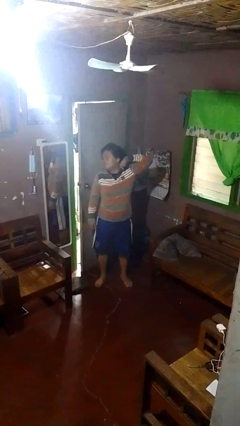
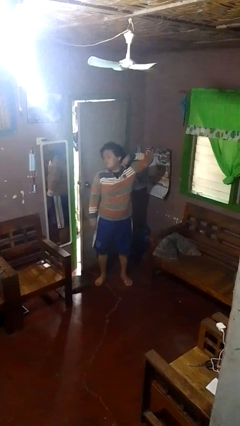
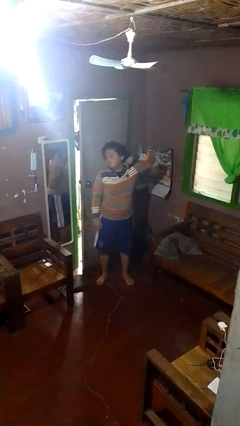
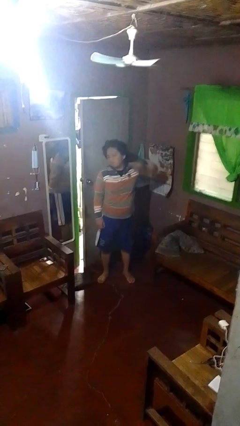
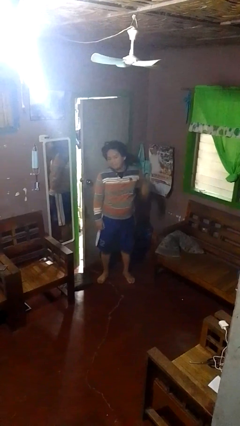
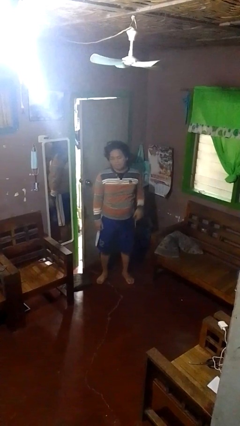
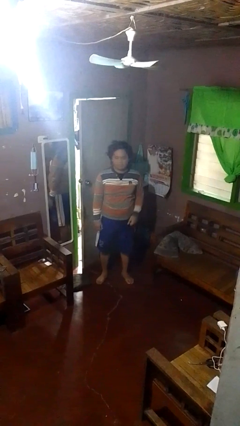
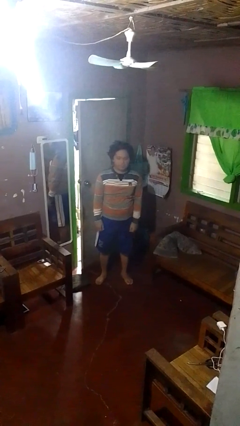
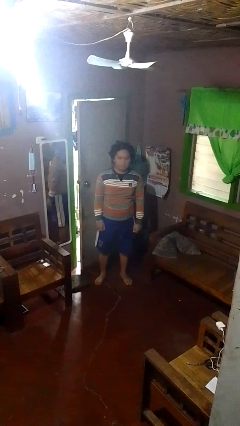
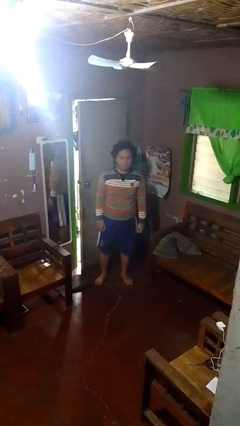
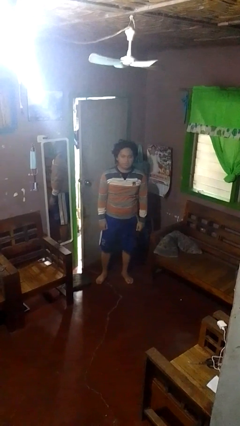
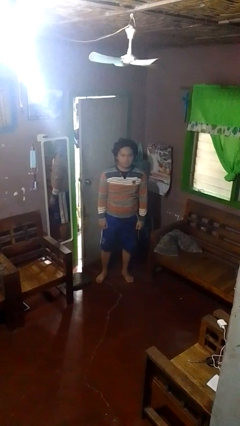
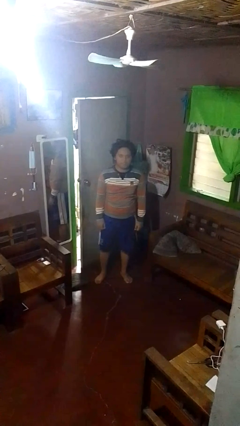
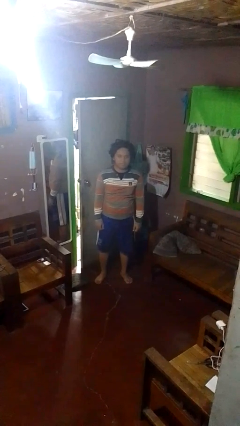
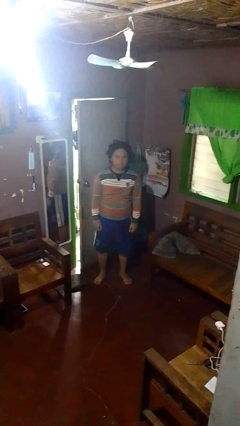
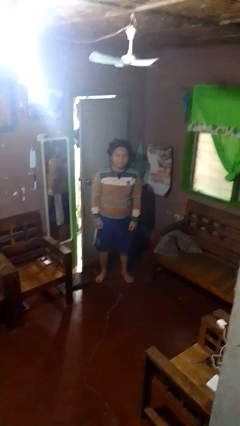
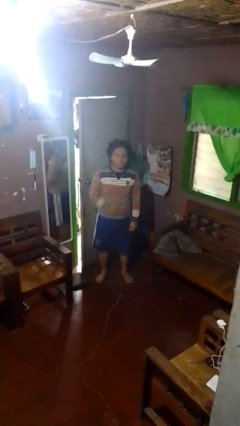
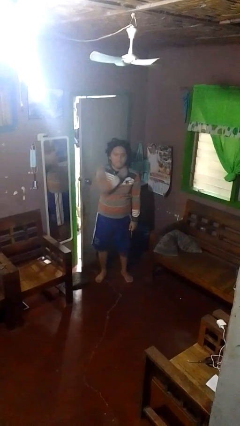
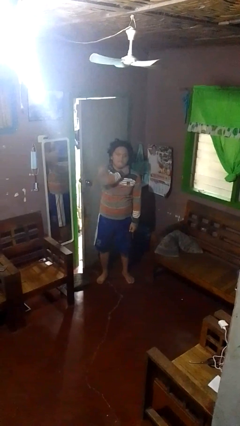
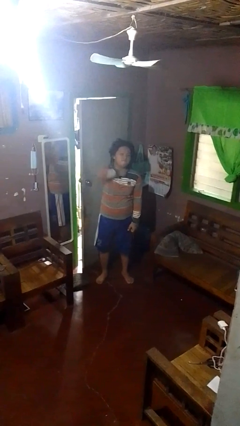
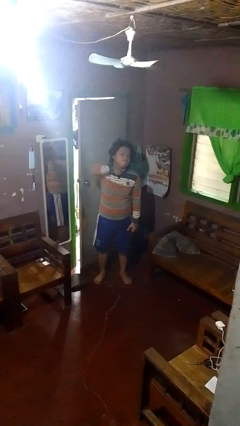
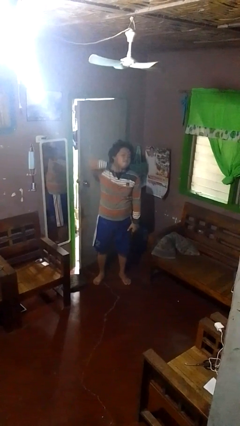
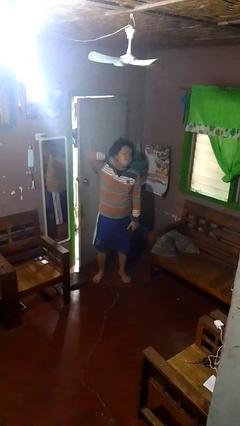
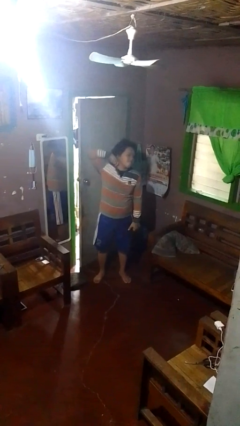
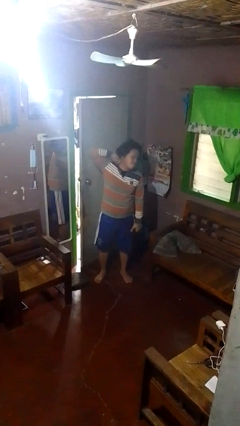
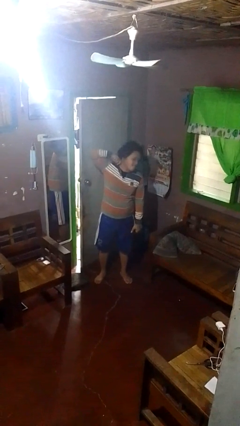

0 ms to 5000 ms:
person dries hair with hairdryer

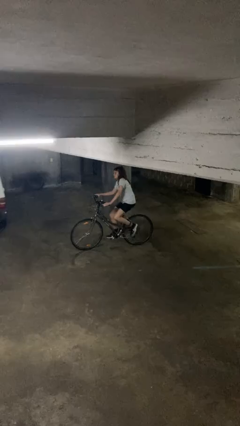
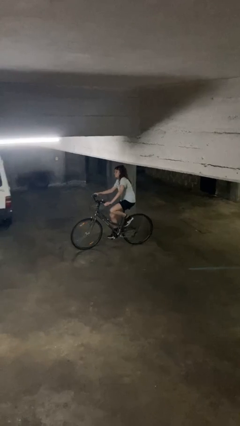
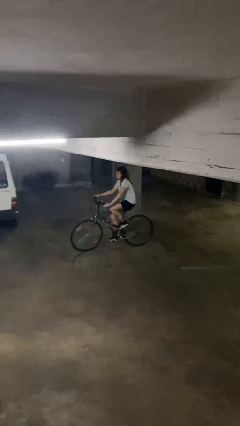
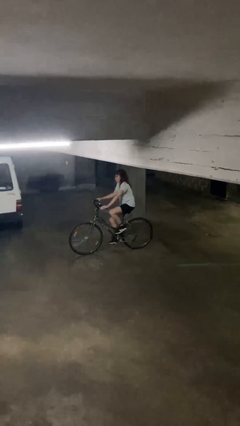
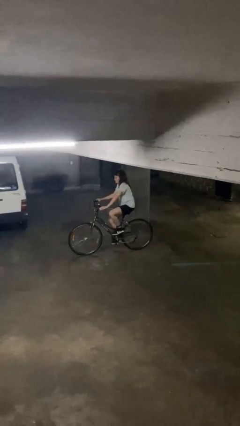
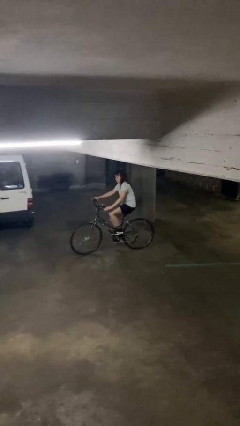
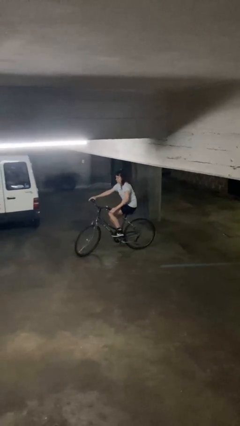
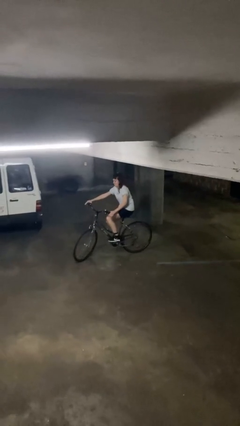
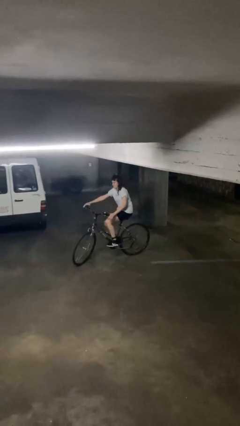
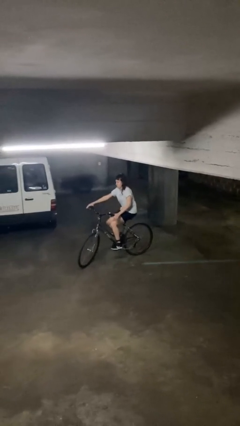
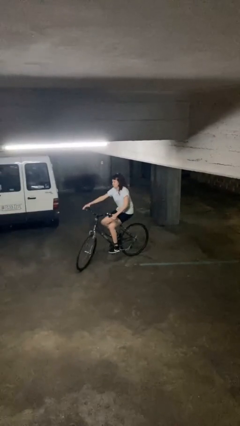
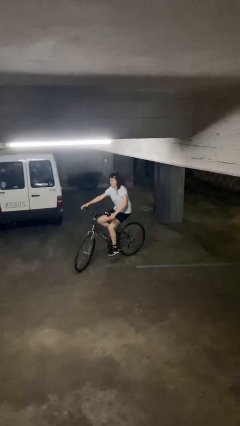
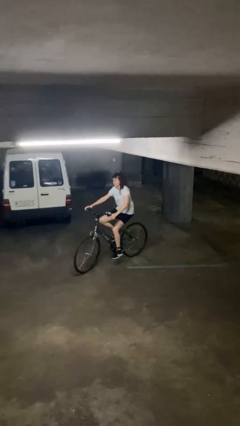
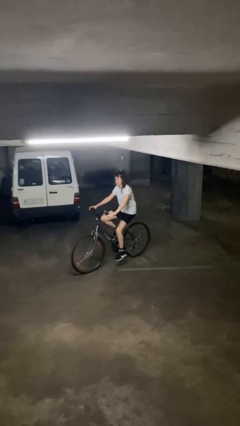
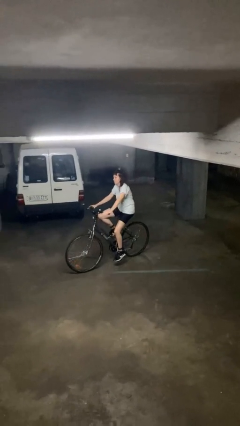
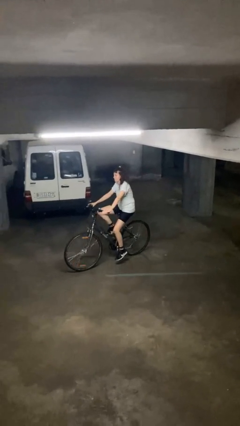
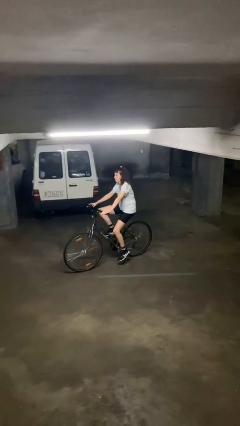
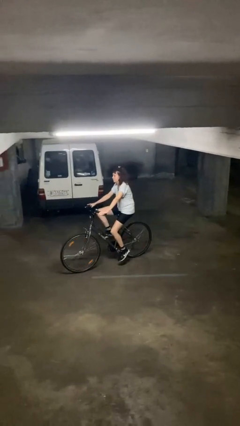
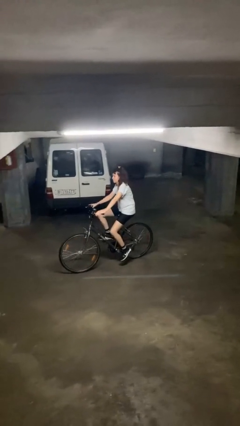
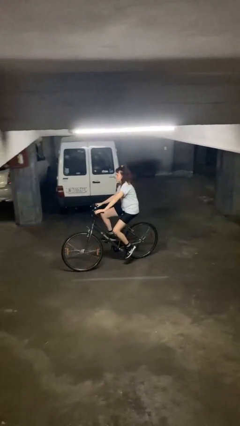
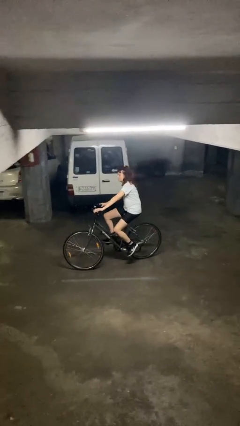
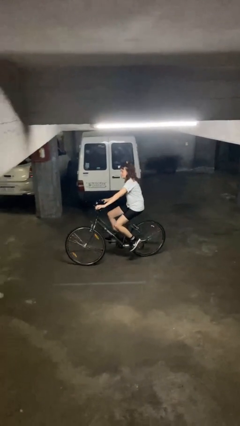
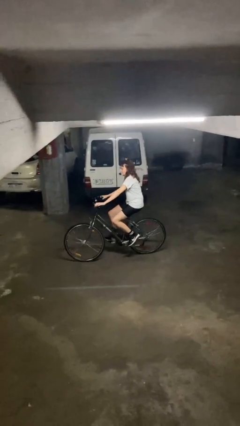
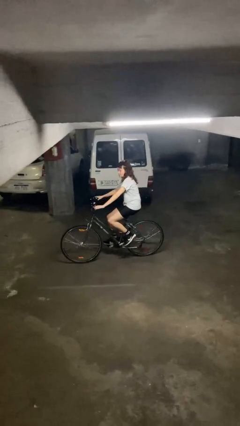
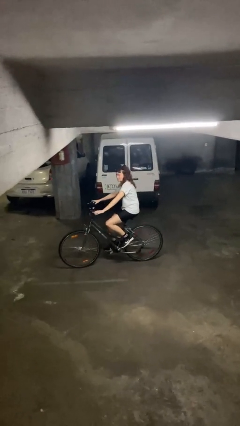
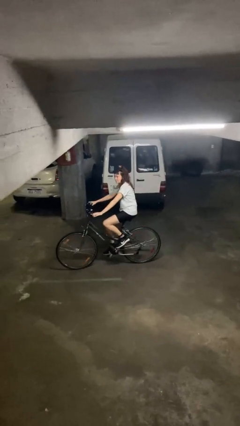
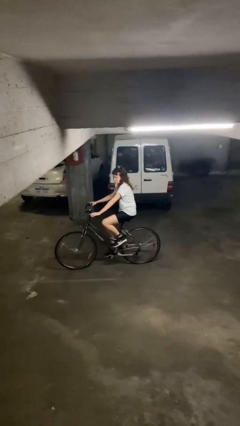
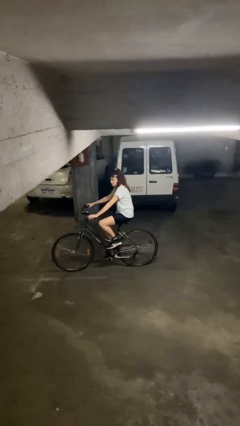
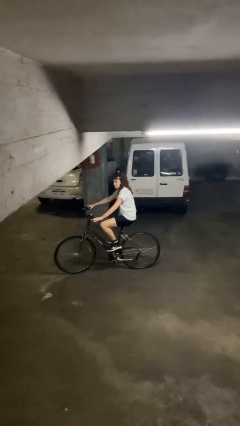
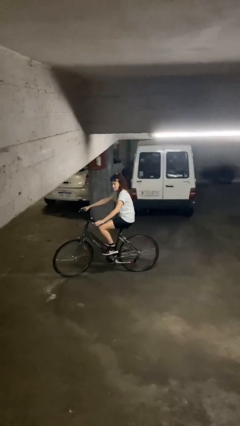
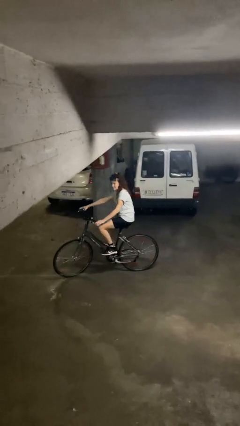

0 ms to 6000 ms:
person rides bicycle

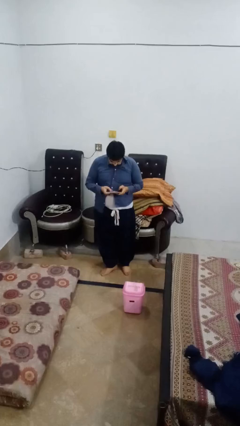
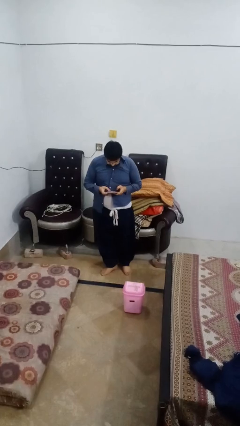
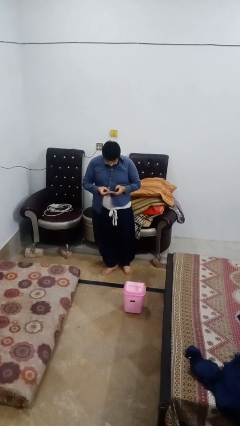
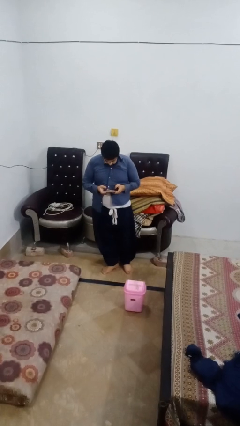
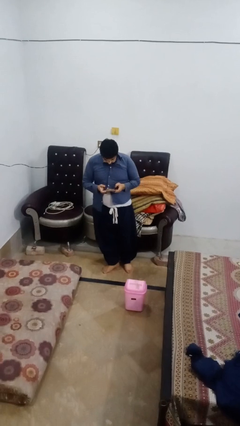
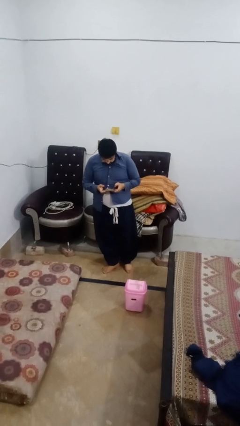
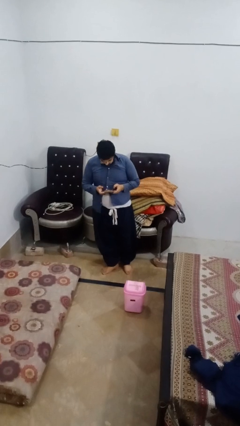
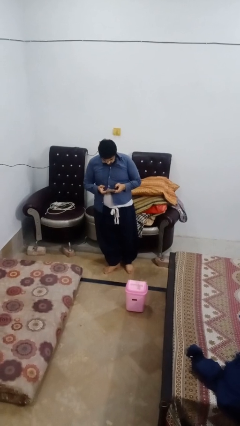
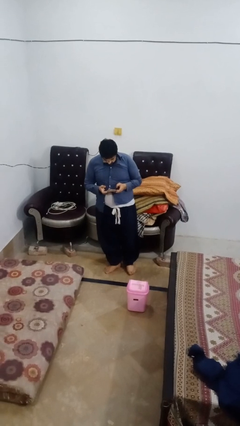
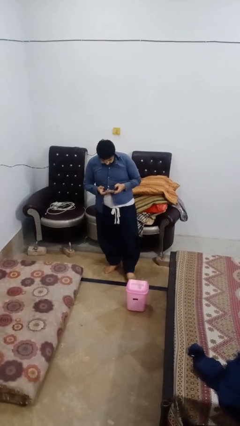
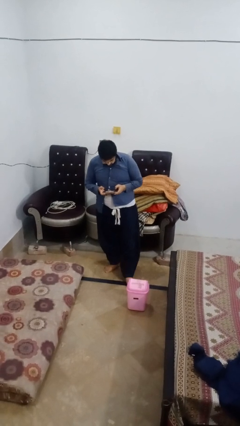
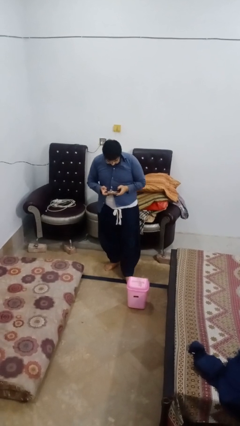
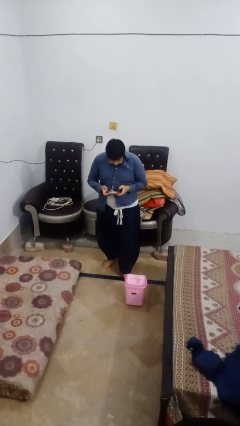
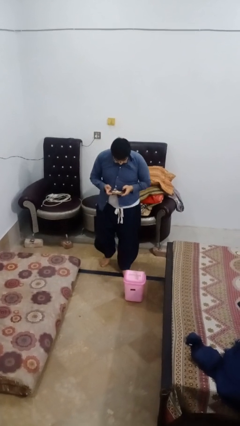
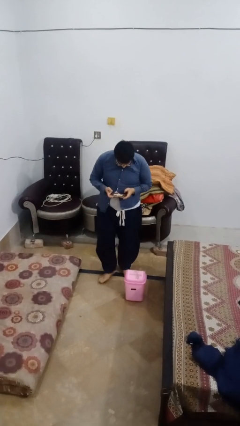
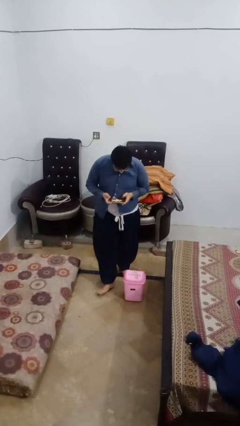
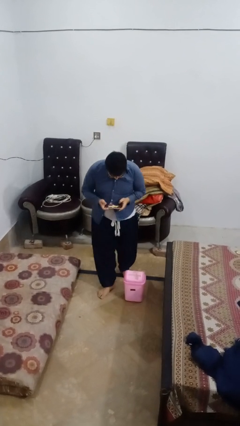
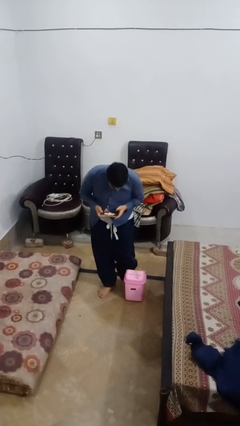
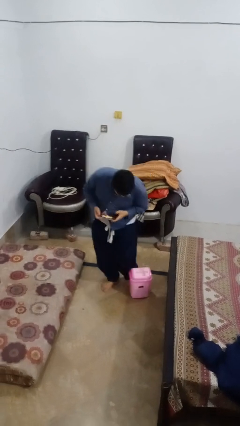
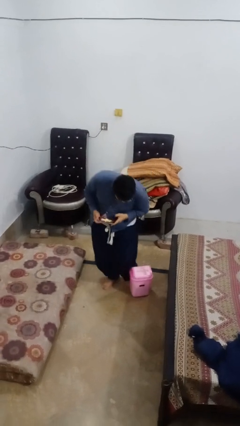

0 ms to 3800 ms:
person trips on object on floor

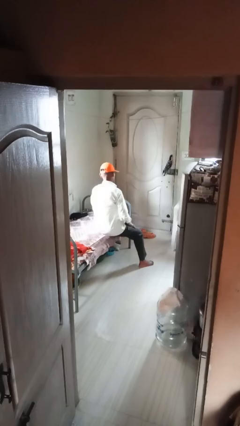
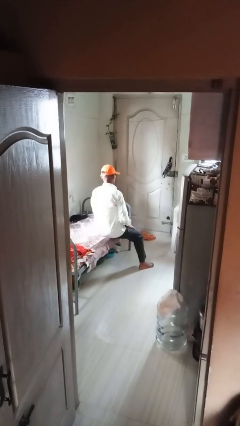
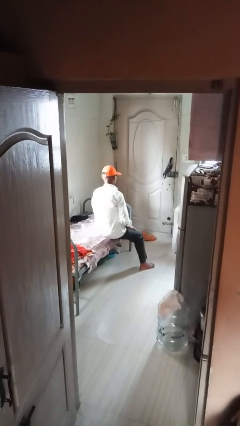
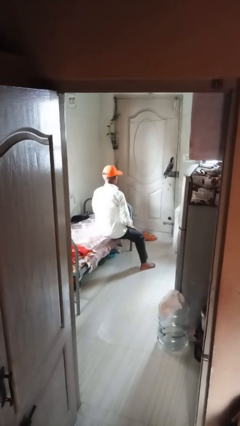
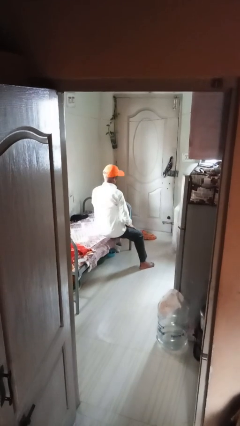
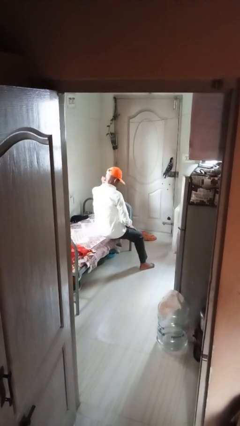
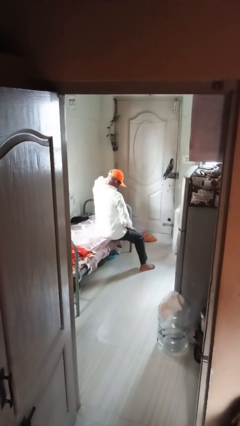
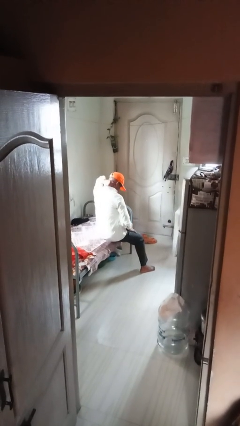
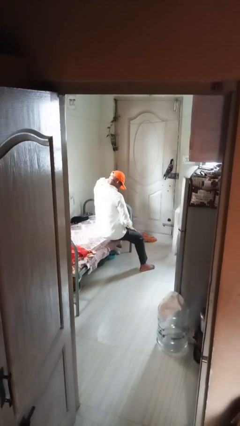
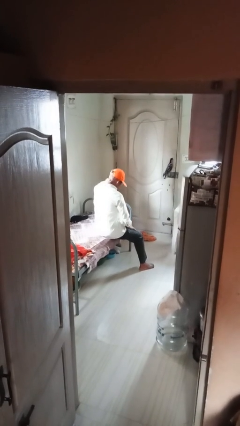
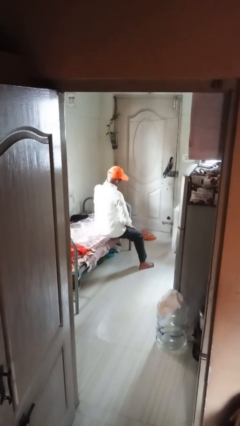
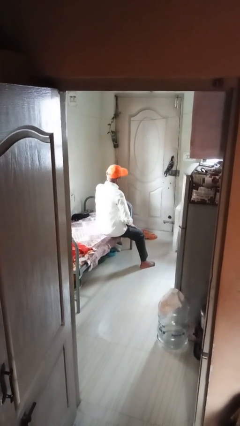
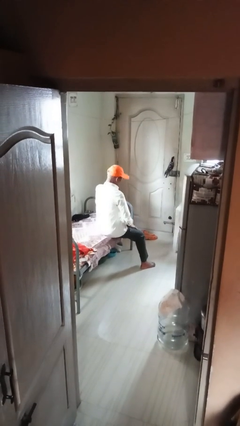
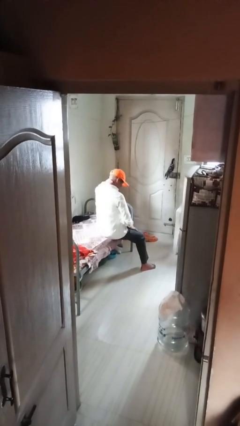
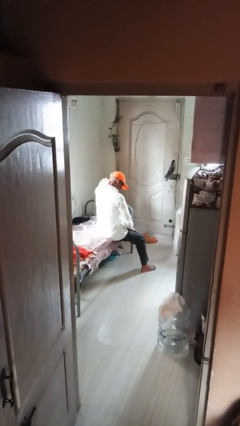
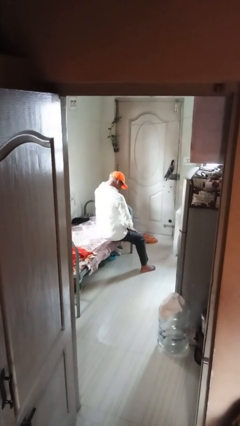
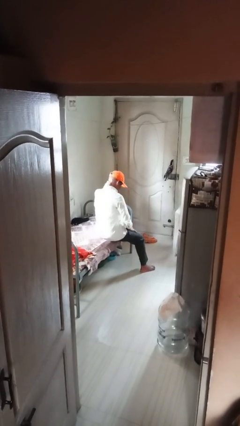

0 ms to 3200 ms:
person rubs neck
